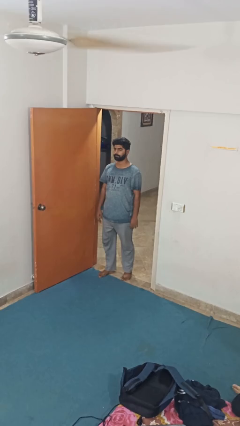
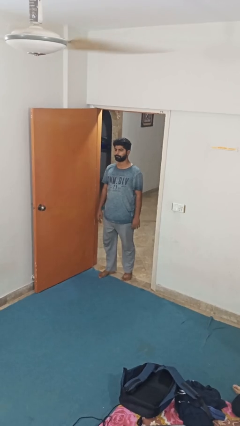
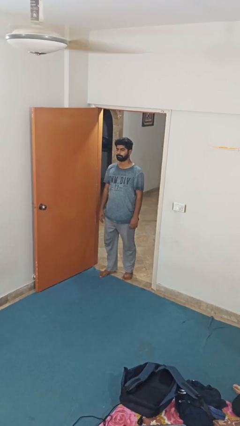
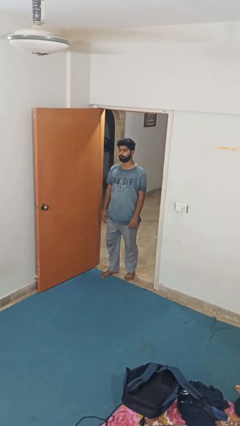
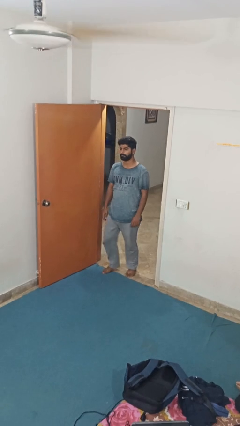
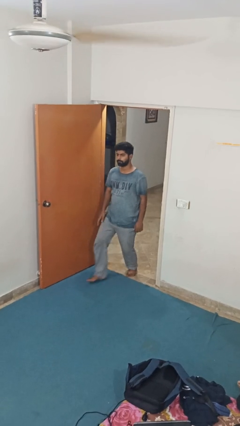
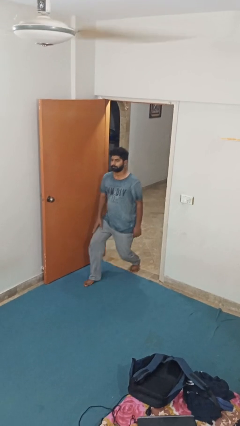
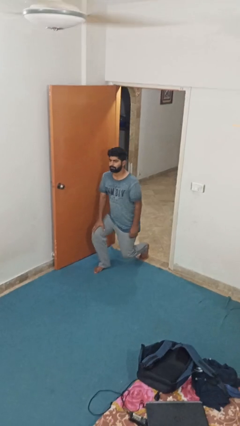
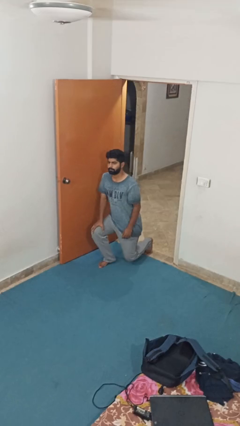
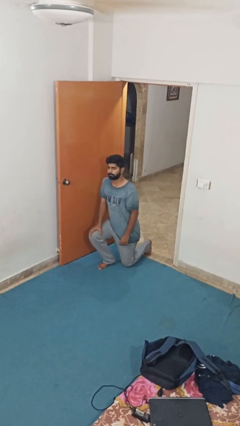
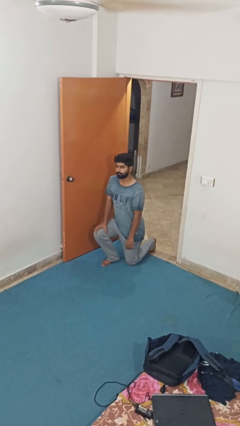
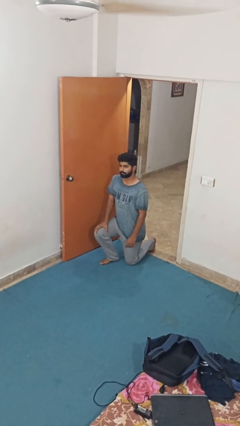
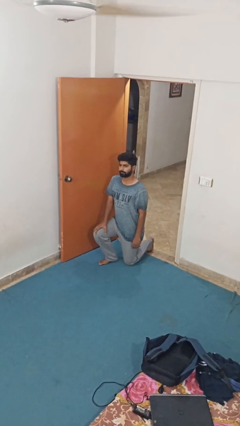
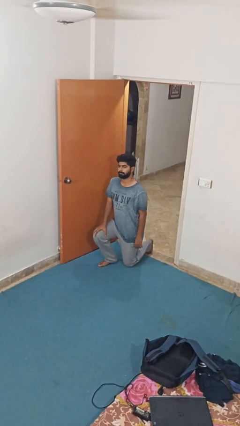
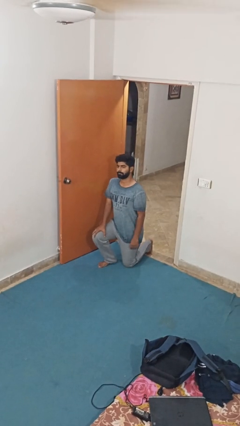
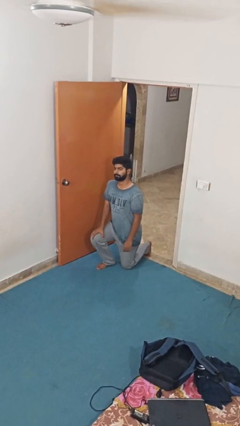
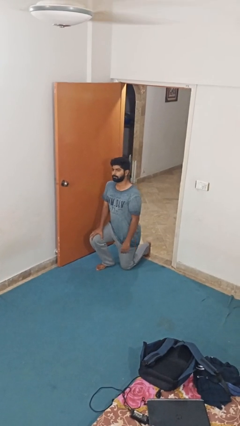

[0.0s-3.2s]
person kneels

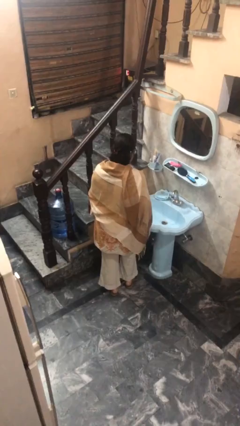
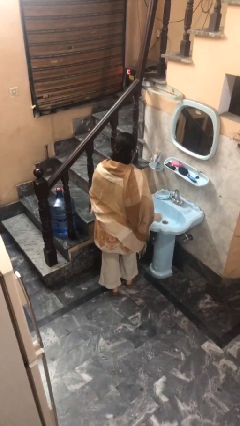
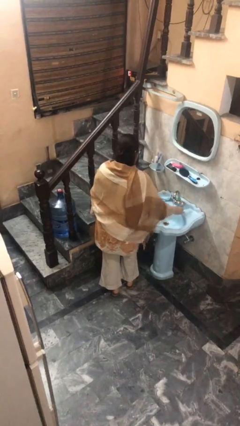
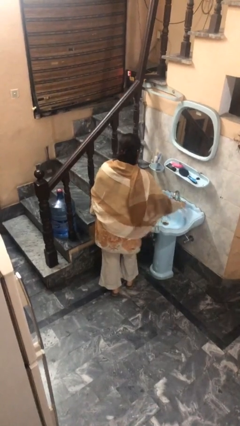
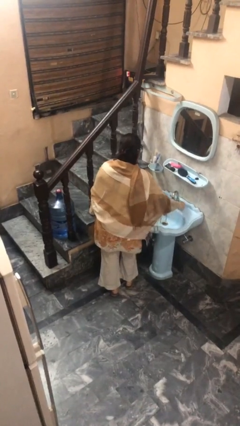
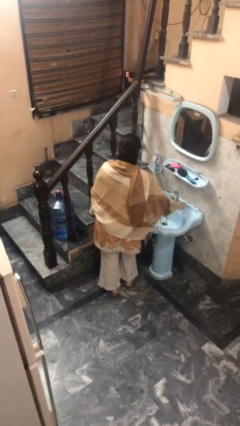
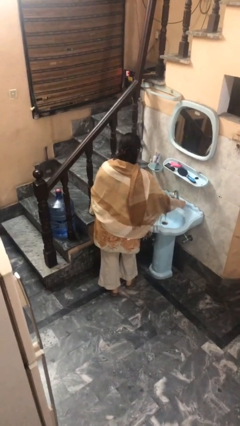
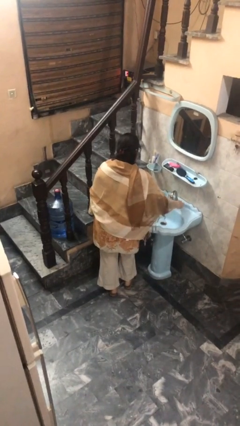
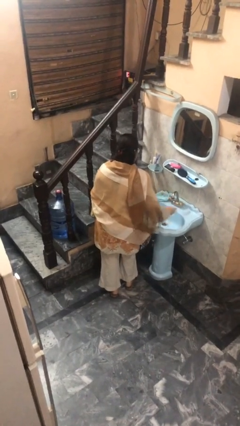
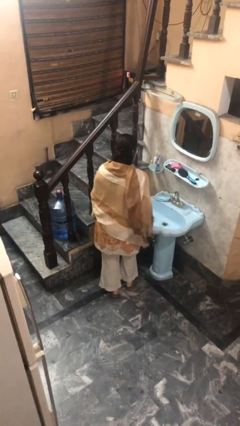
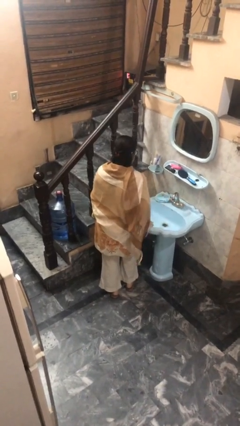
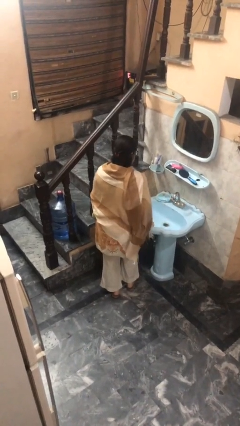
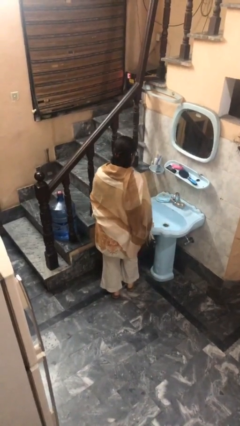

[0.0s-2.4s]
person turns off faucet

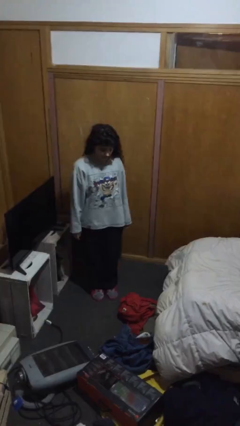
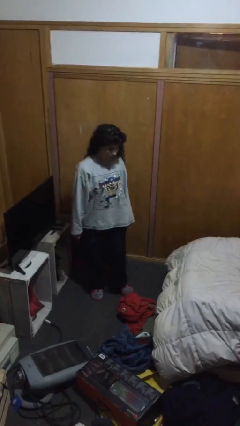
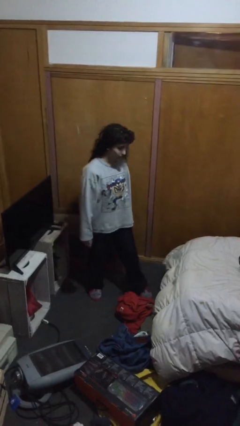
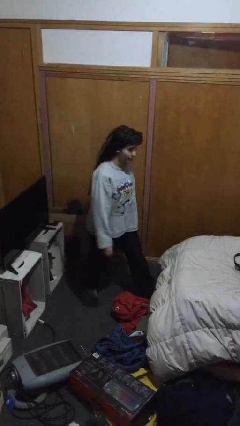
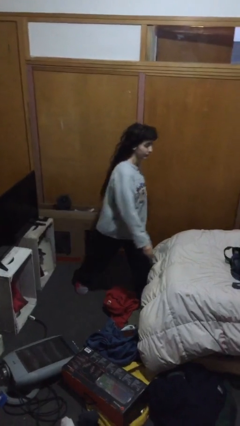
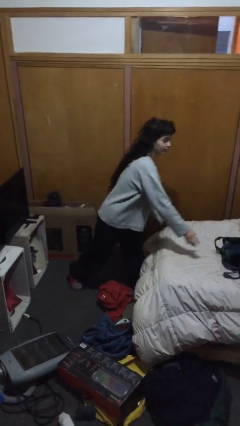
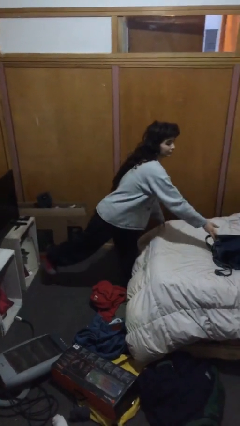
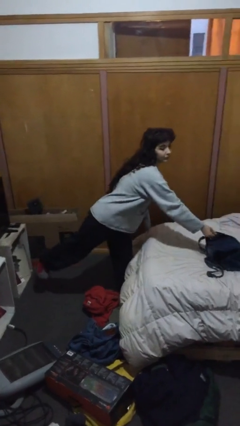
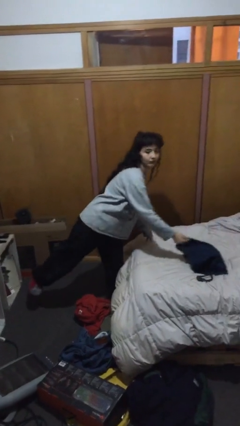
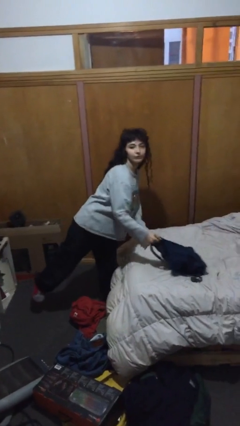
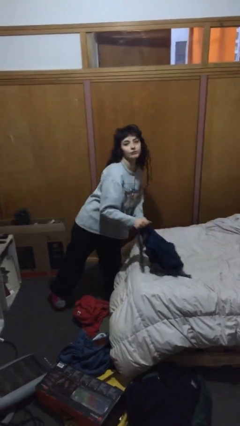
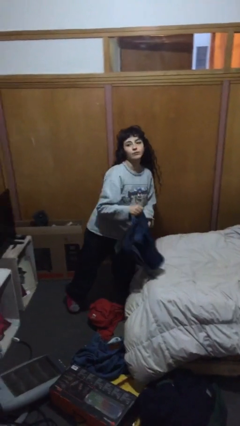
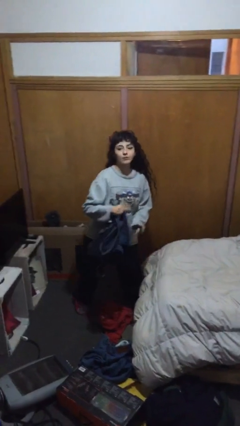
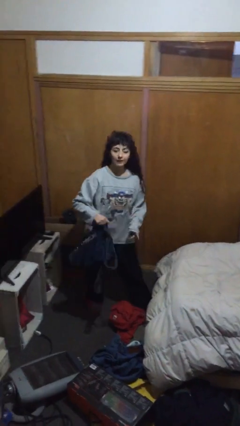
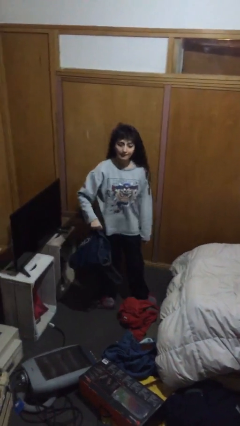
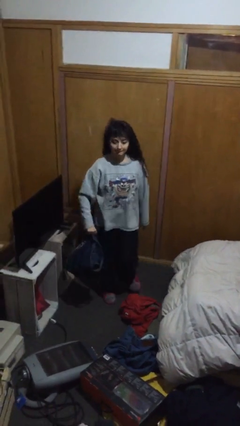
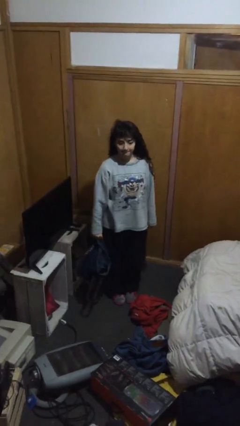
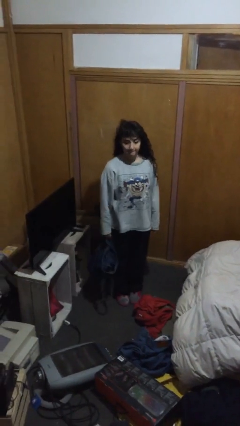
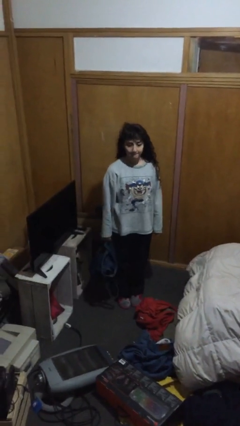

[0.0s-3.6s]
person picks up object from bed

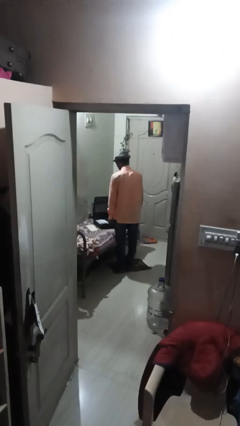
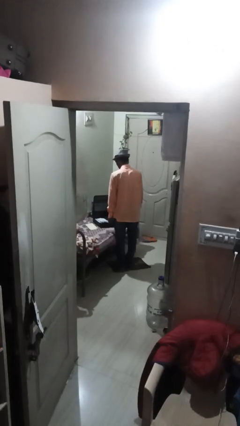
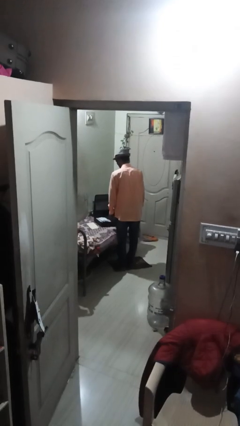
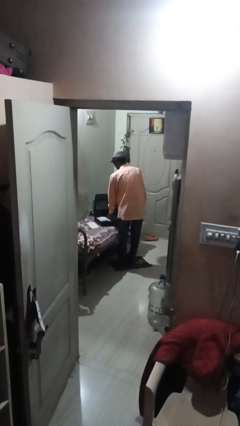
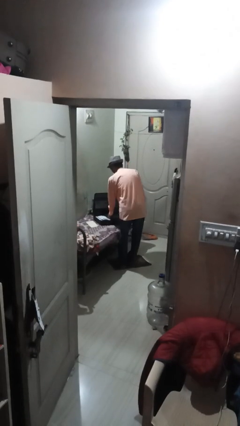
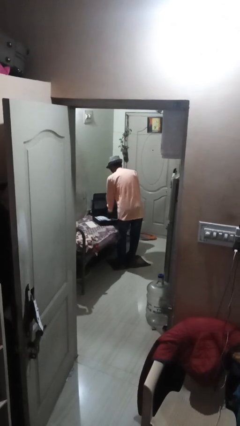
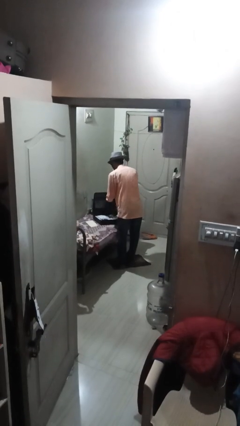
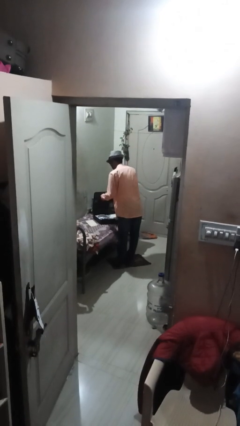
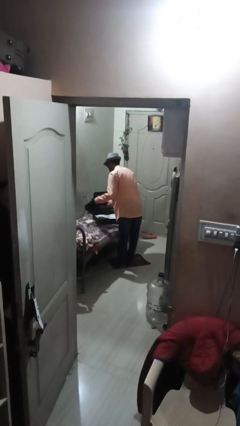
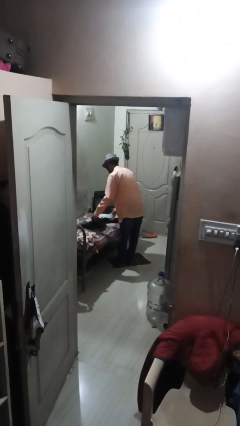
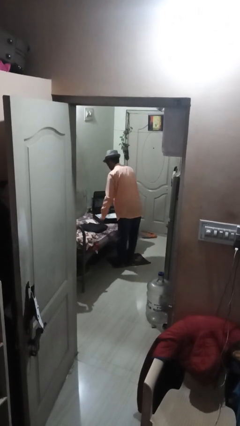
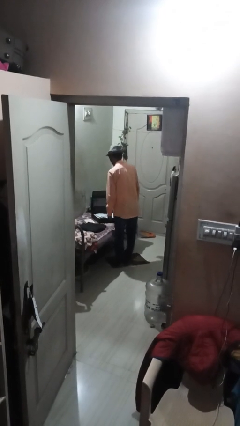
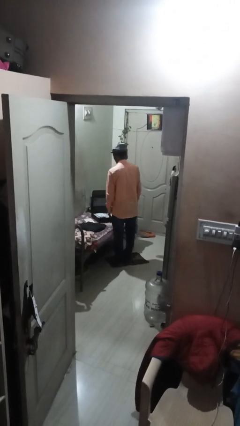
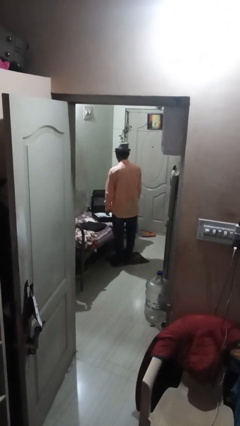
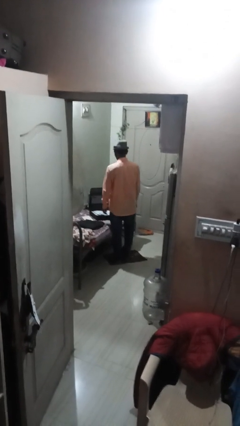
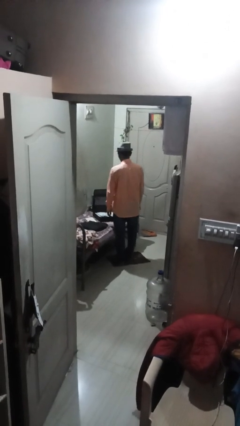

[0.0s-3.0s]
person unloads clothes from suitcase

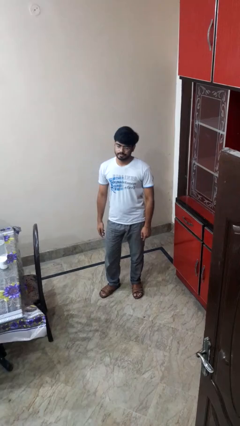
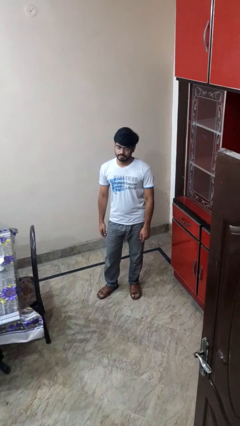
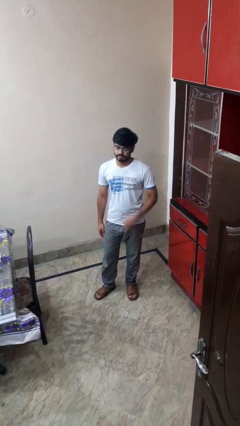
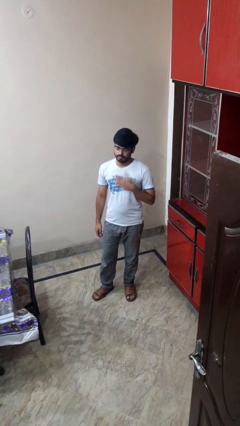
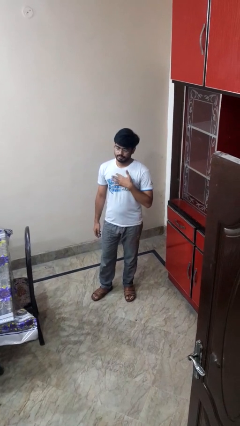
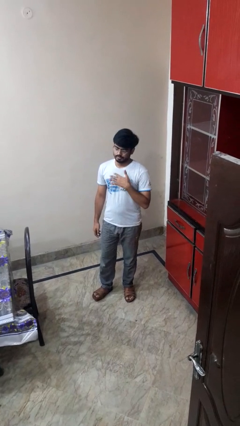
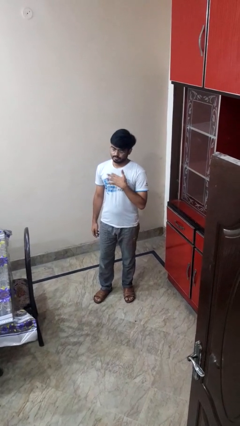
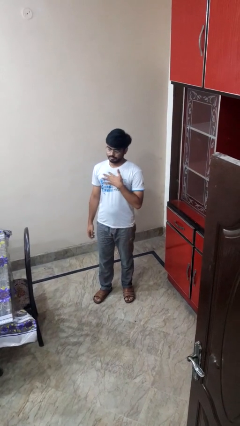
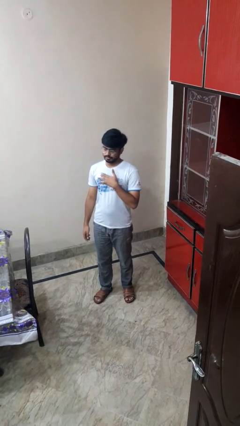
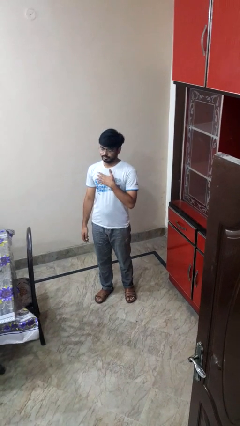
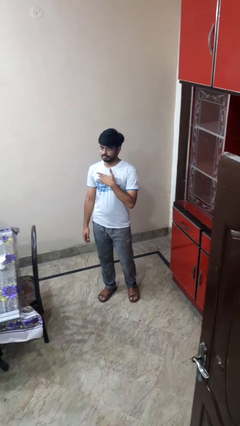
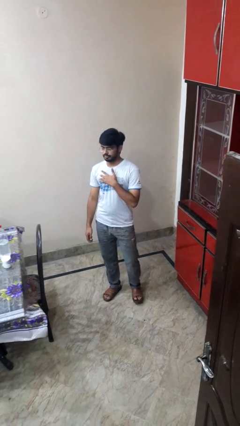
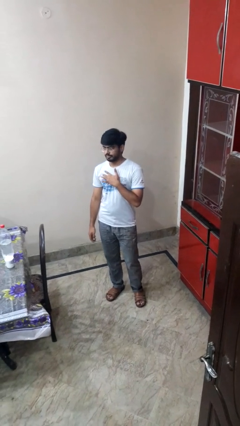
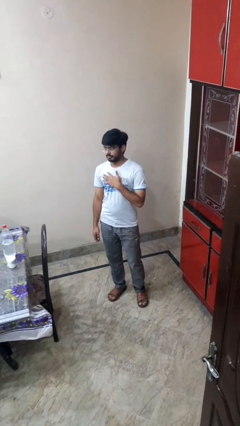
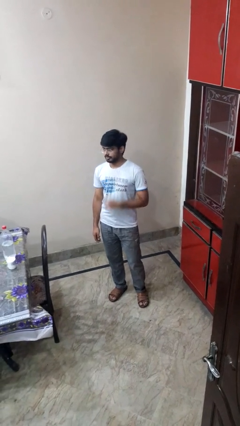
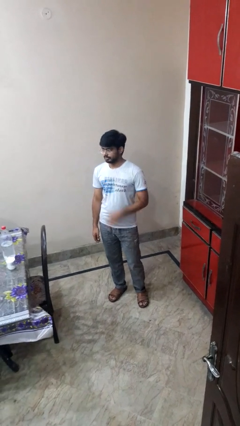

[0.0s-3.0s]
person drums on chest

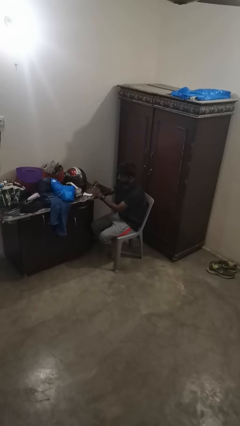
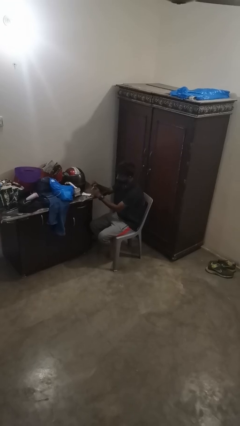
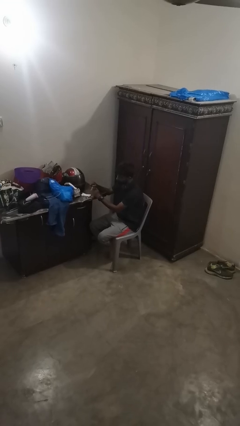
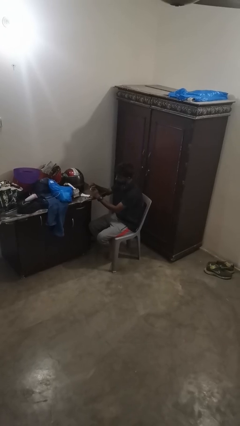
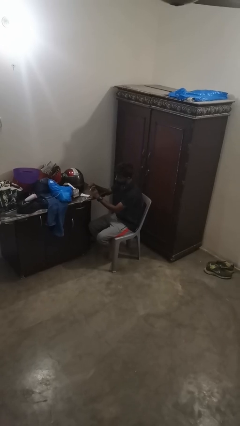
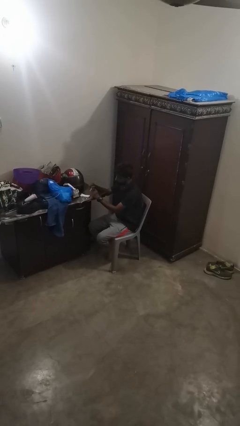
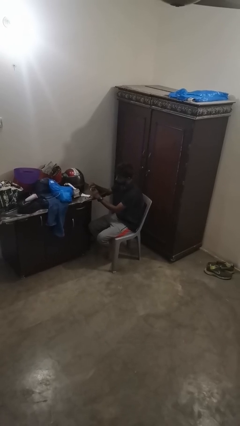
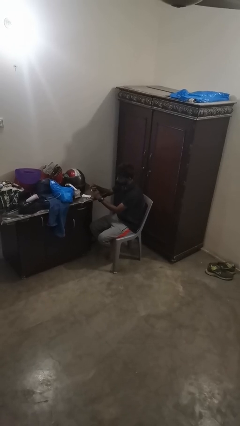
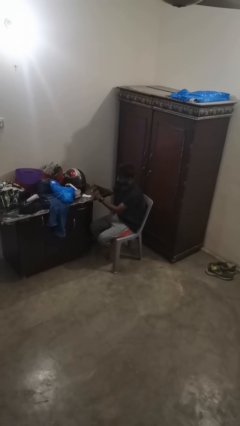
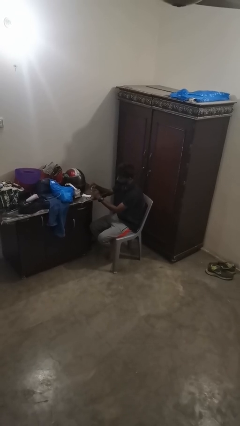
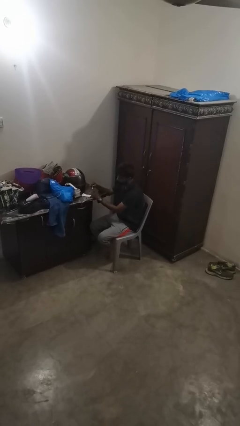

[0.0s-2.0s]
person paints fingernails

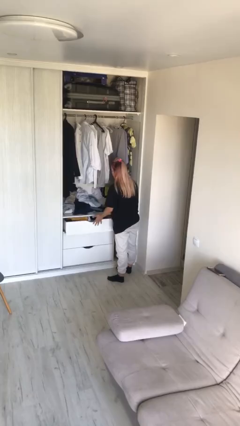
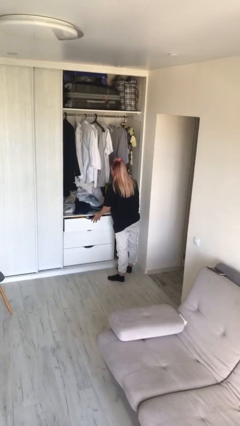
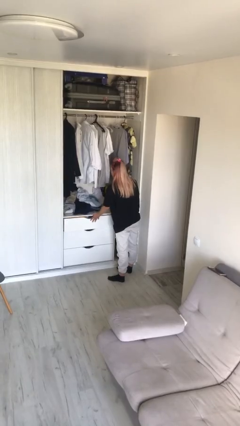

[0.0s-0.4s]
person closes dresser drawer
